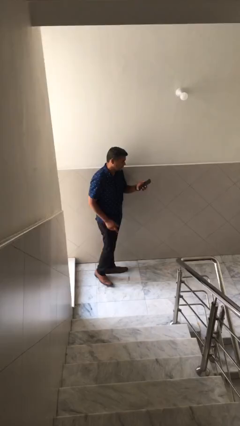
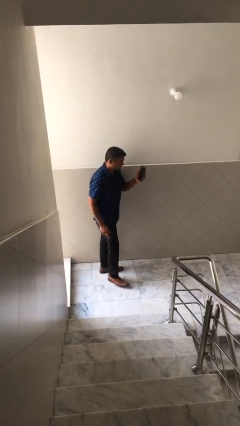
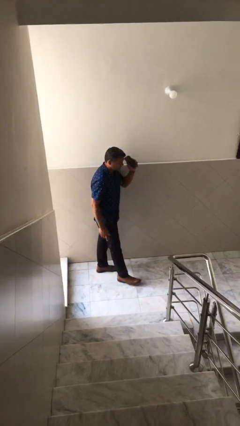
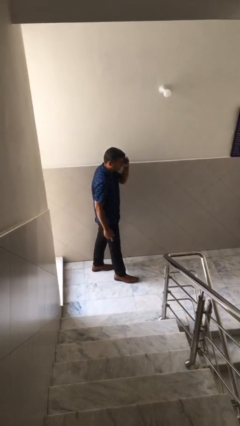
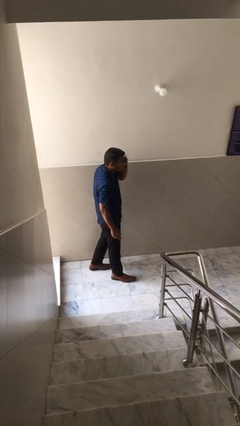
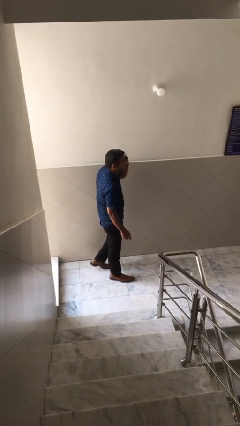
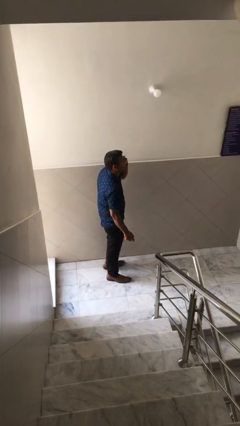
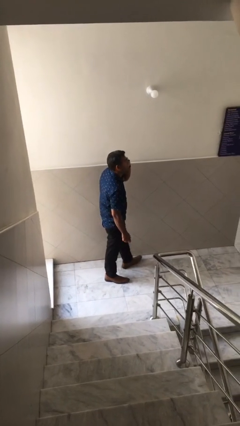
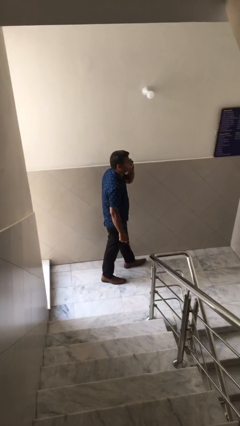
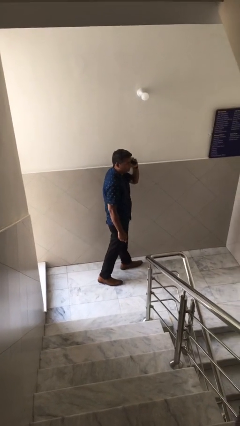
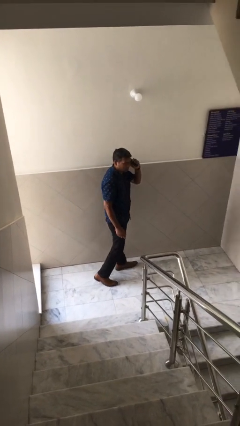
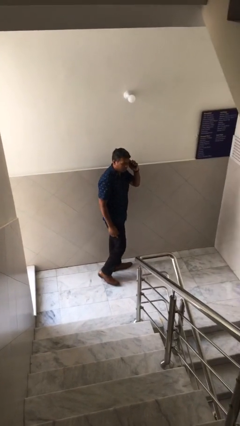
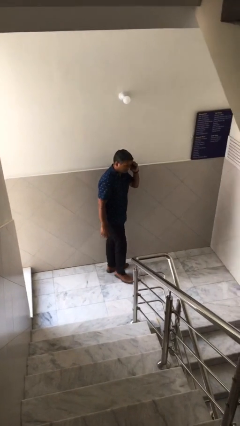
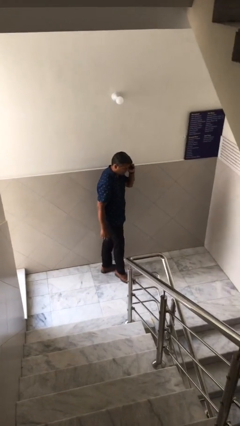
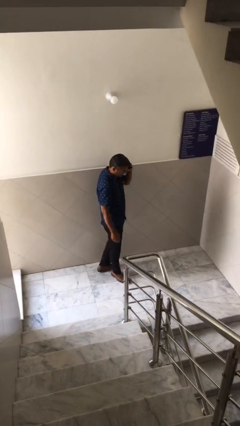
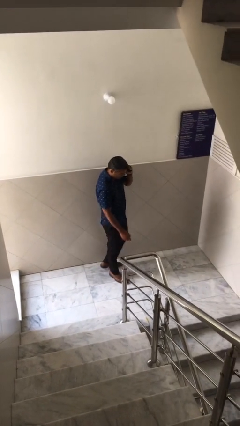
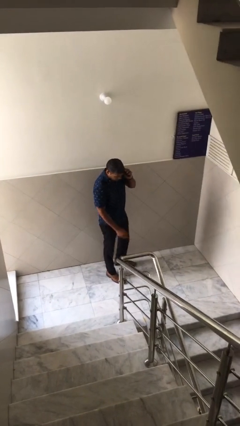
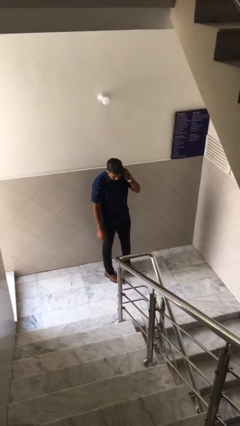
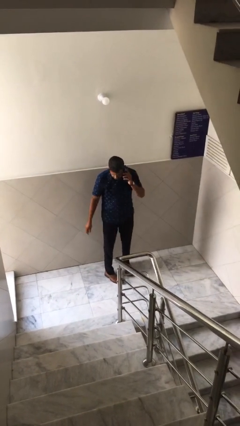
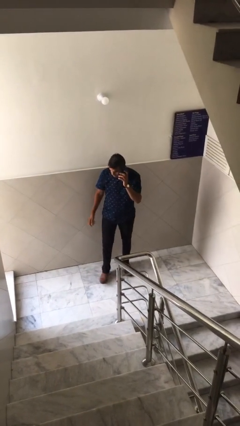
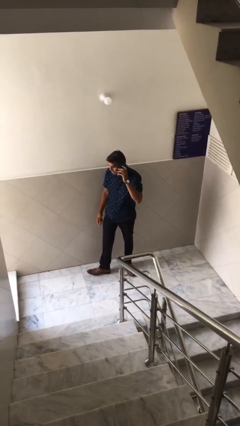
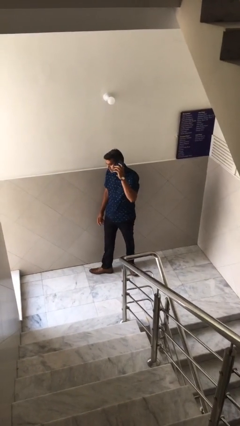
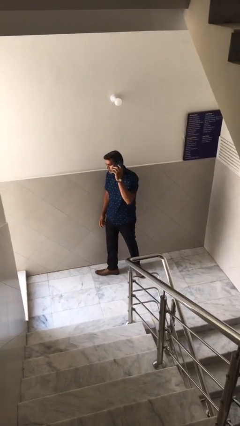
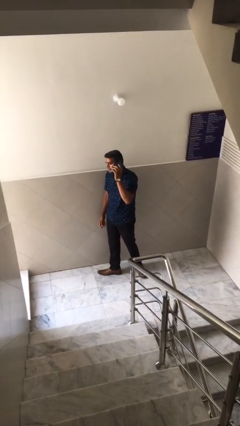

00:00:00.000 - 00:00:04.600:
person talks on phone

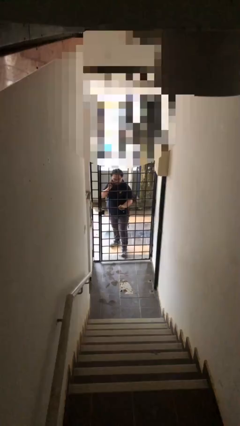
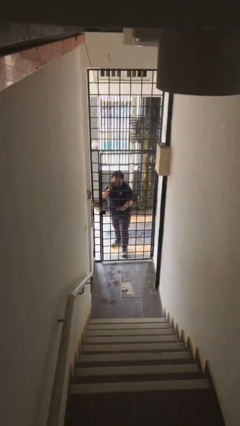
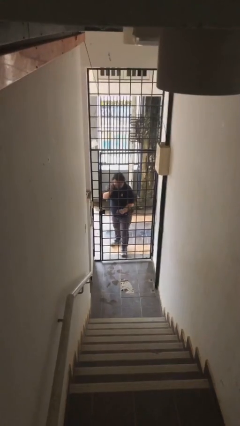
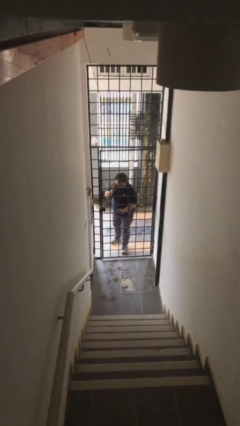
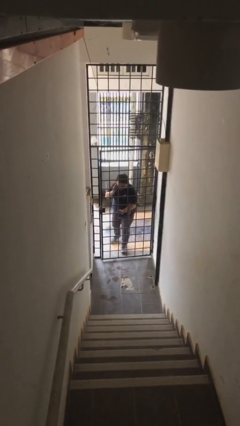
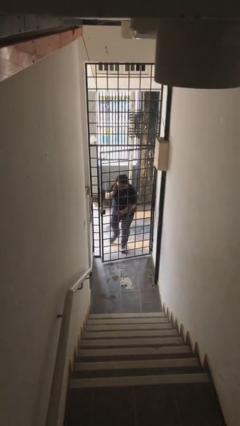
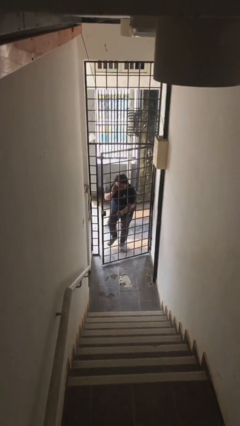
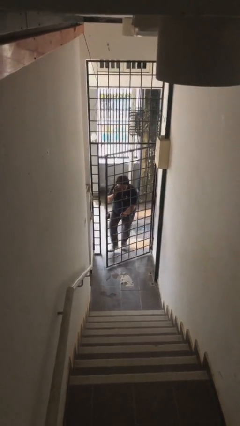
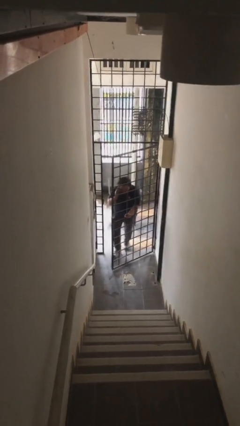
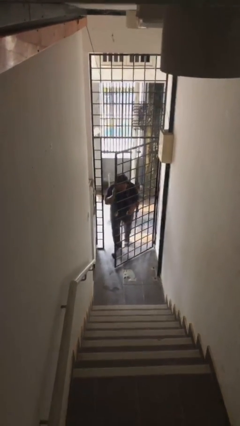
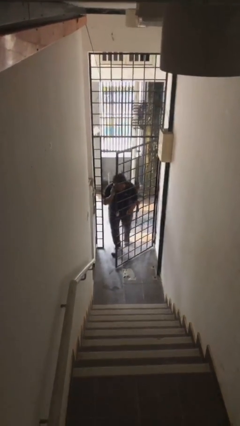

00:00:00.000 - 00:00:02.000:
person opens facility door

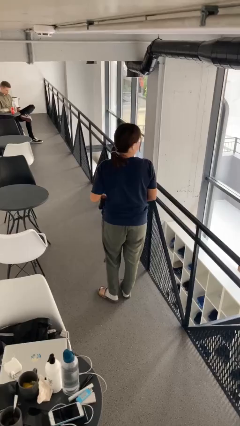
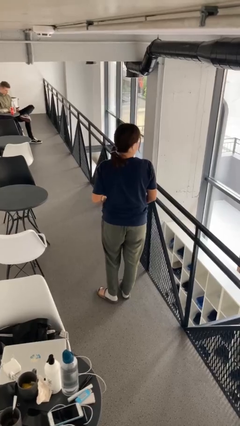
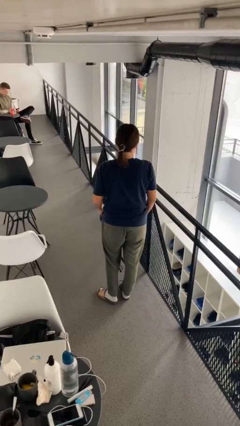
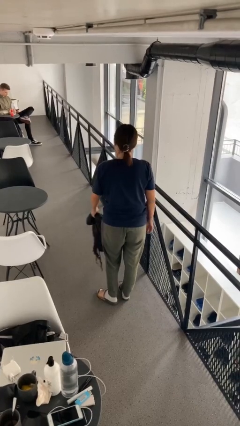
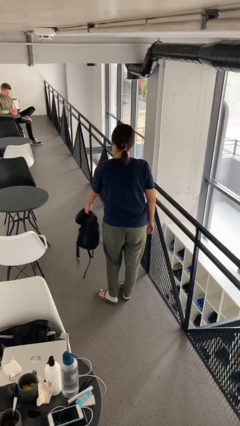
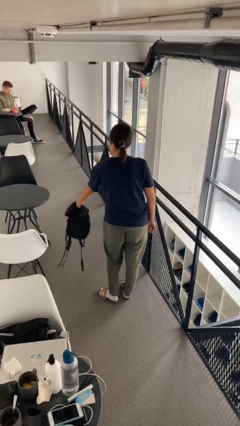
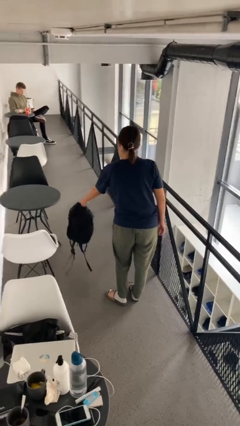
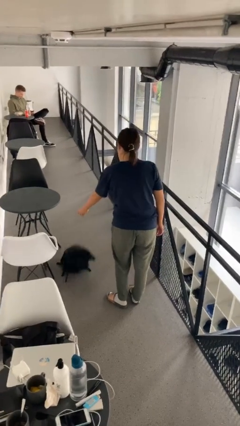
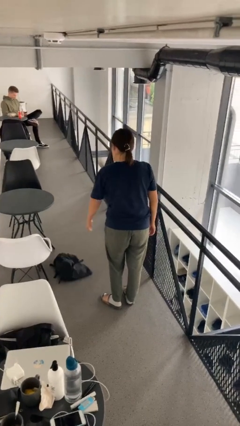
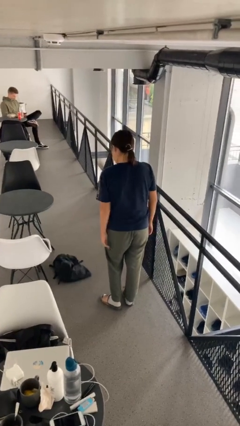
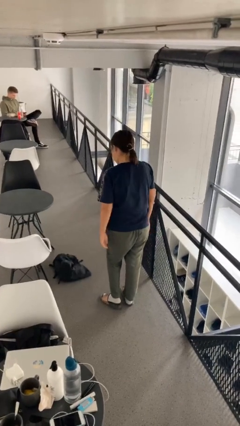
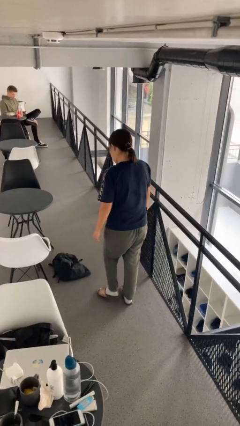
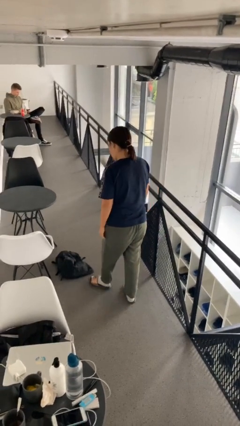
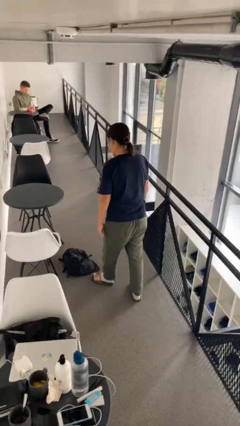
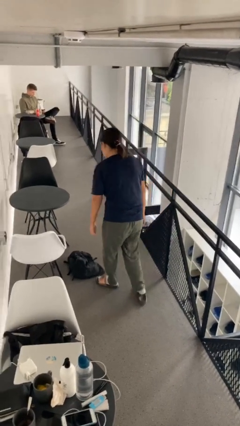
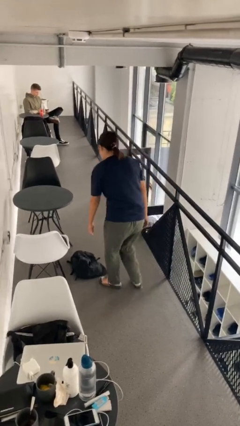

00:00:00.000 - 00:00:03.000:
person throws object to ground

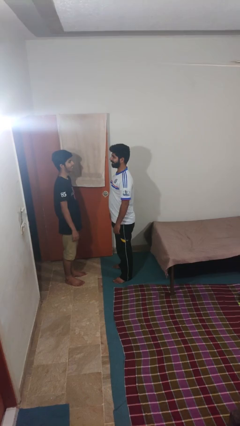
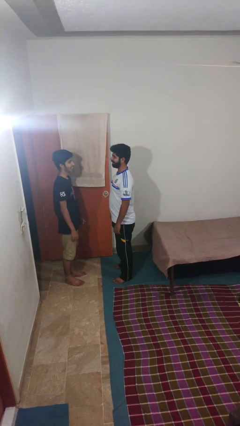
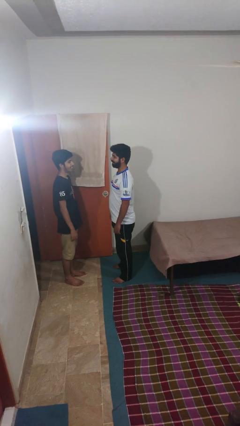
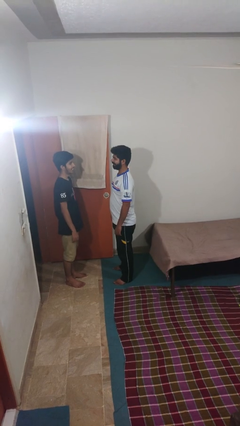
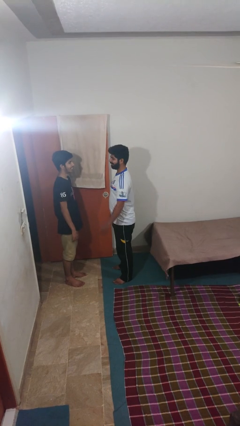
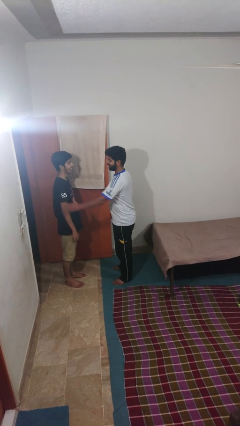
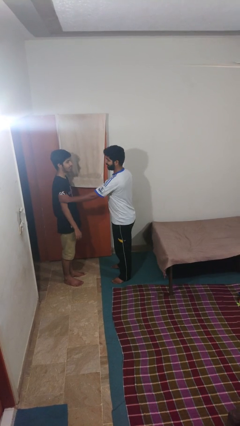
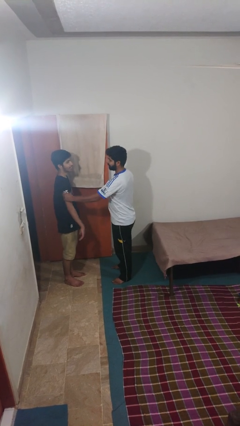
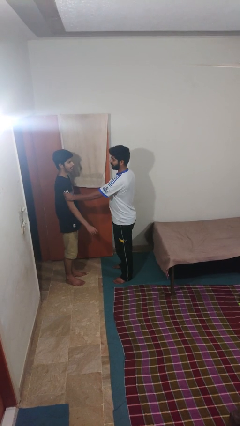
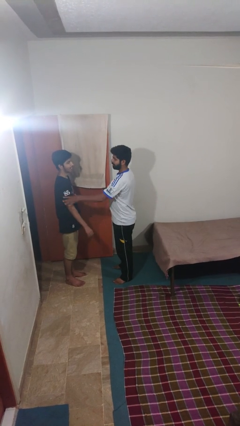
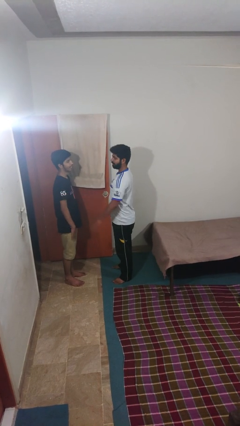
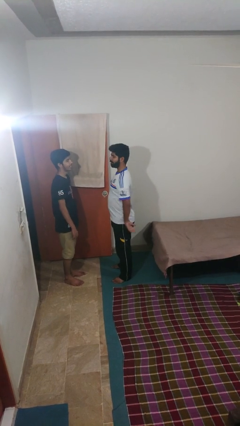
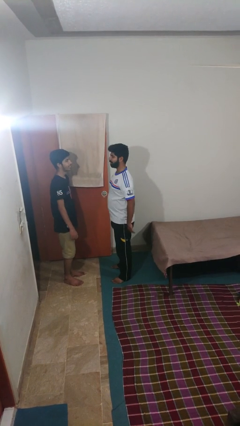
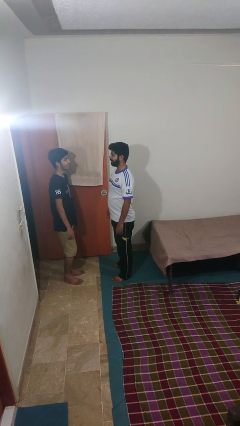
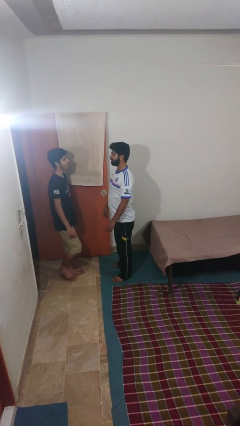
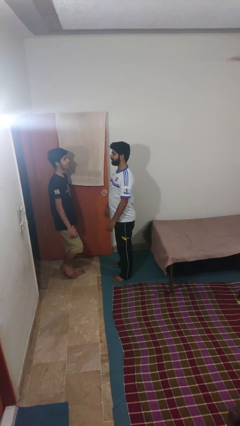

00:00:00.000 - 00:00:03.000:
person grabs person by bicep

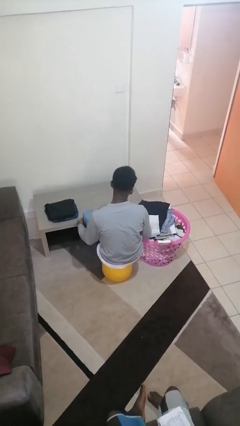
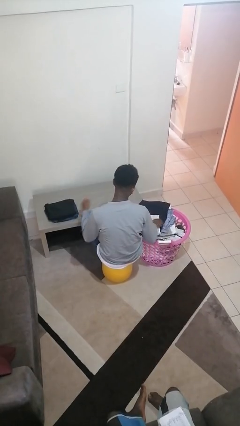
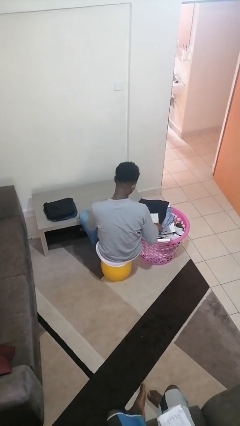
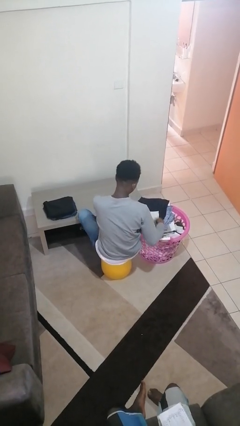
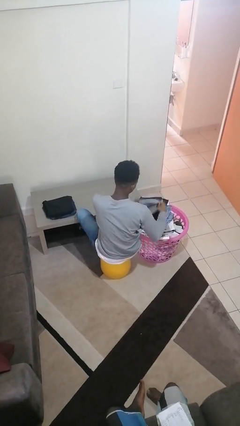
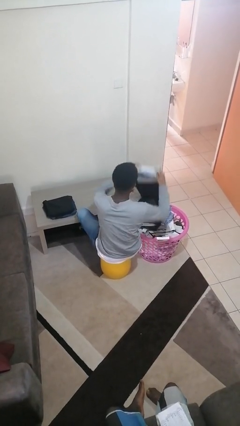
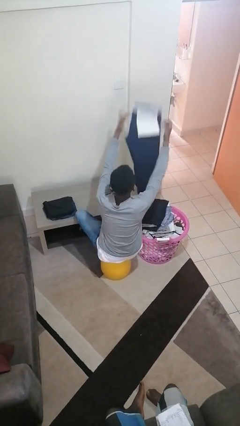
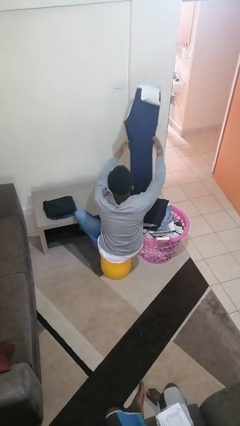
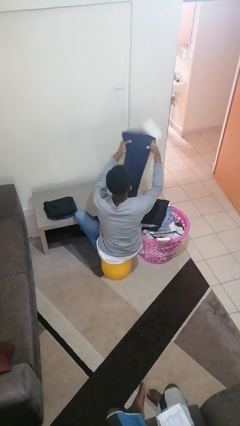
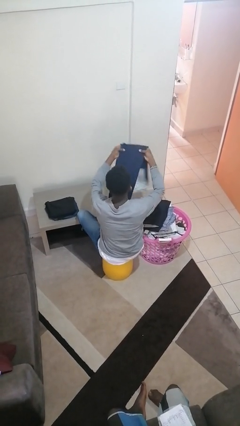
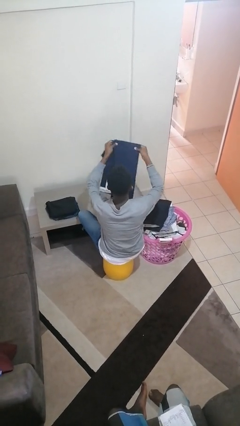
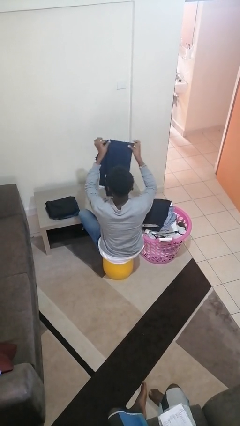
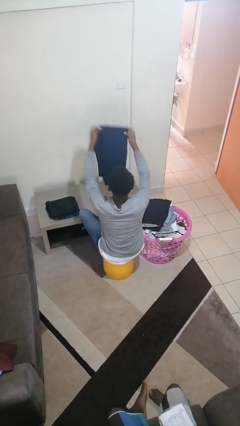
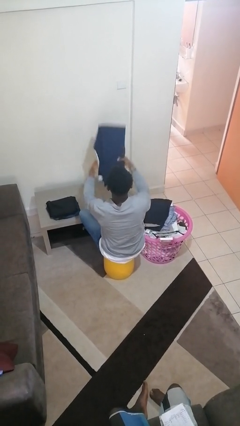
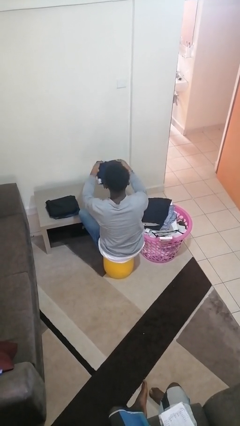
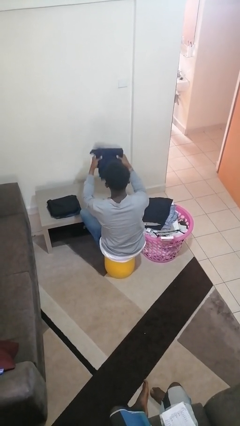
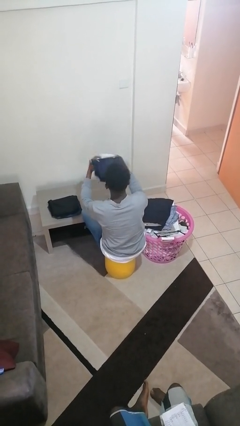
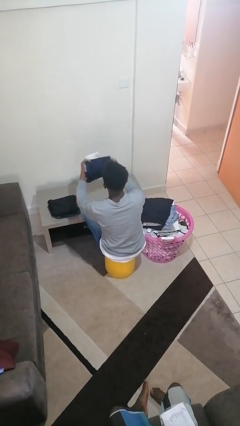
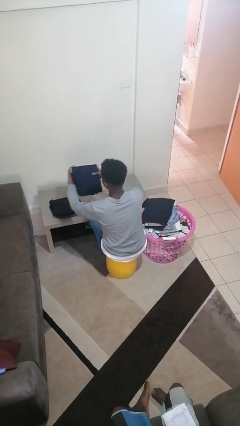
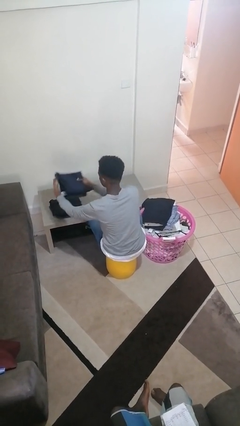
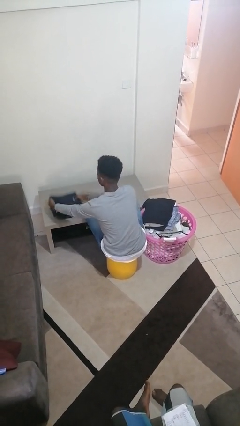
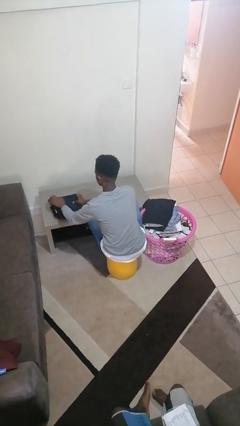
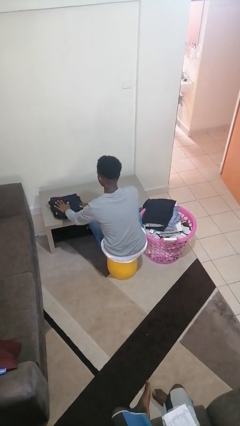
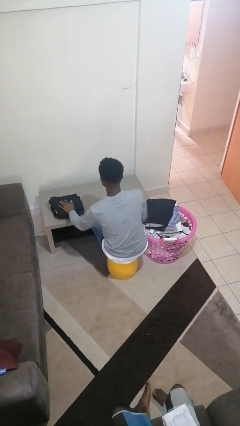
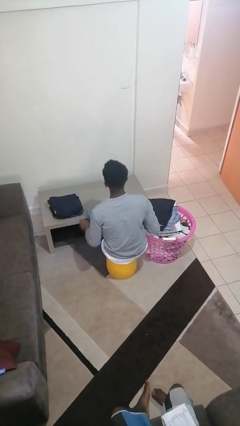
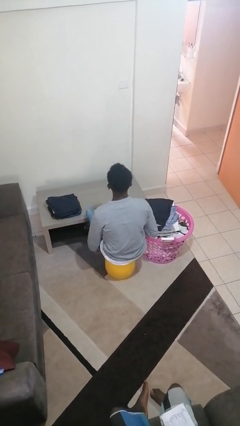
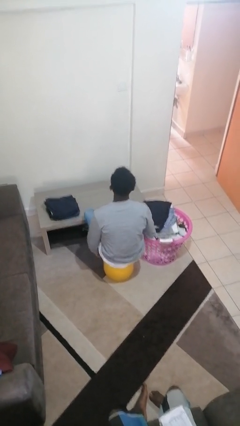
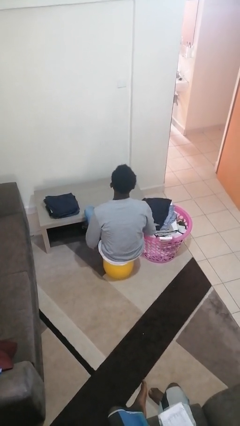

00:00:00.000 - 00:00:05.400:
person folds pants
